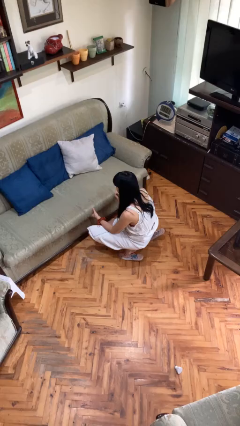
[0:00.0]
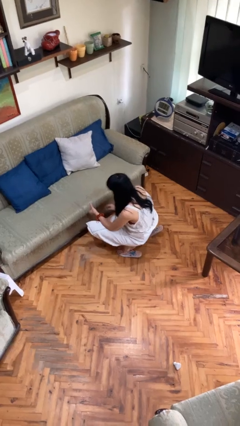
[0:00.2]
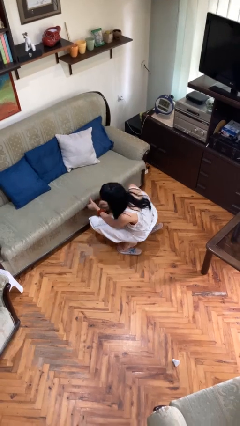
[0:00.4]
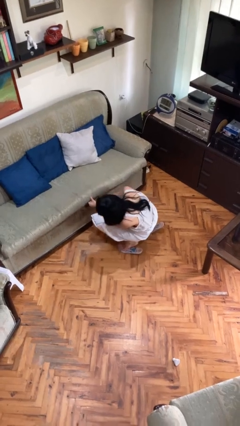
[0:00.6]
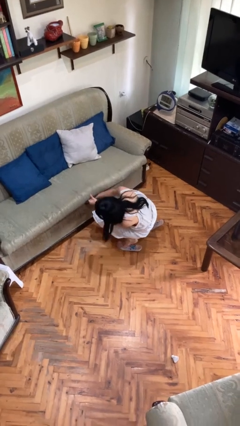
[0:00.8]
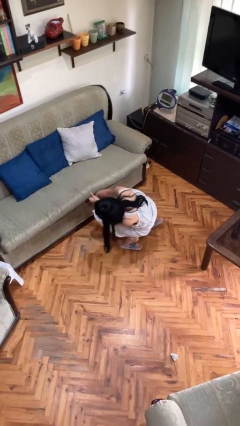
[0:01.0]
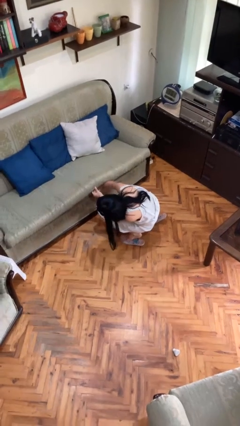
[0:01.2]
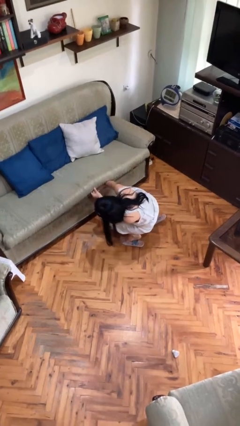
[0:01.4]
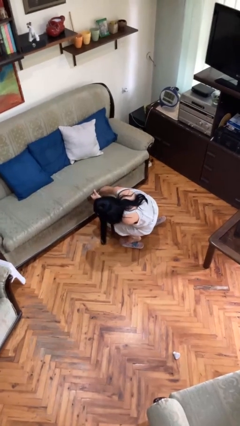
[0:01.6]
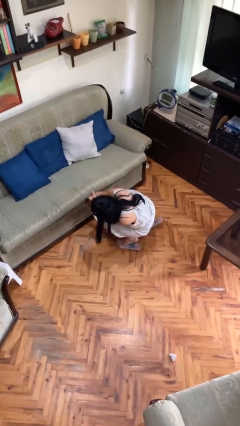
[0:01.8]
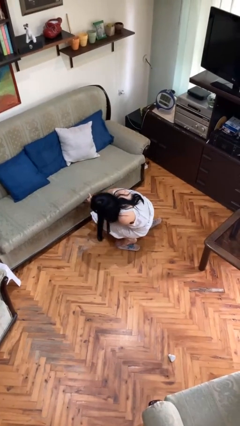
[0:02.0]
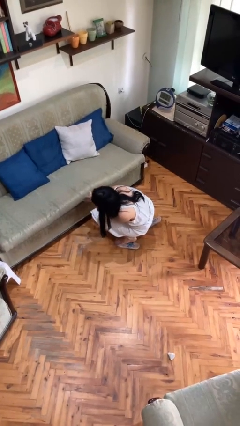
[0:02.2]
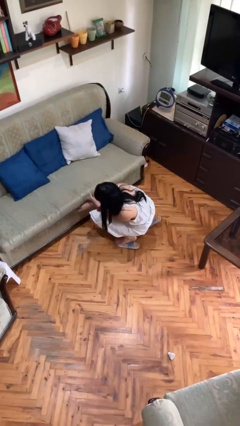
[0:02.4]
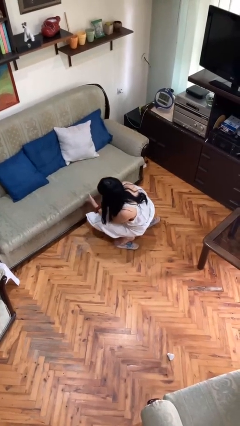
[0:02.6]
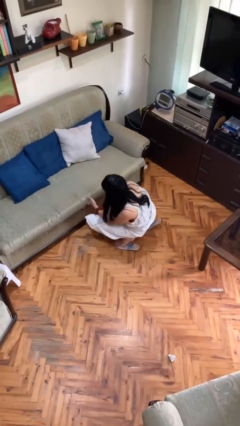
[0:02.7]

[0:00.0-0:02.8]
person searches under couch

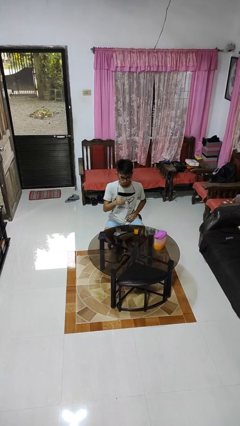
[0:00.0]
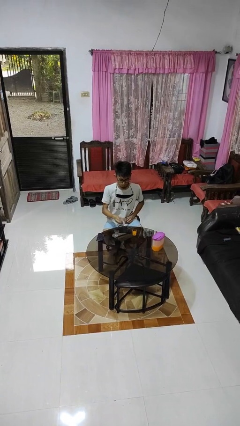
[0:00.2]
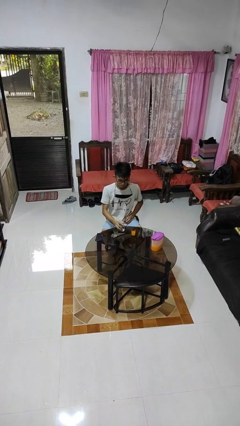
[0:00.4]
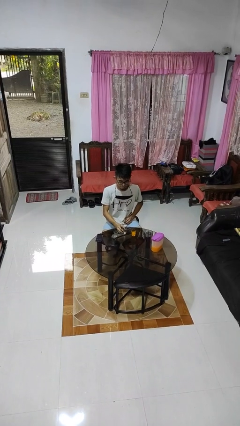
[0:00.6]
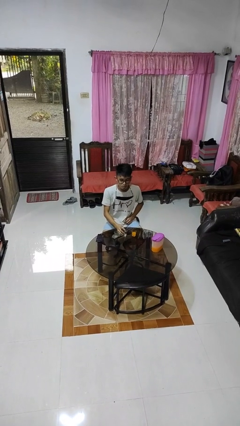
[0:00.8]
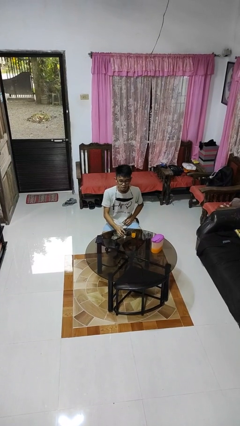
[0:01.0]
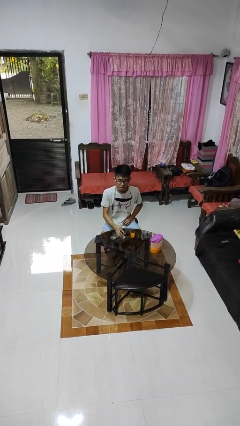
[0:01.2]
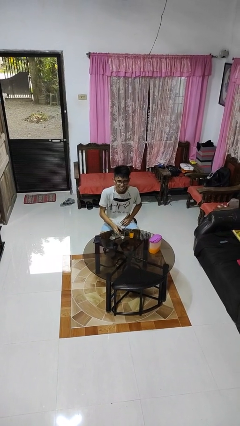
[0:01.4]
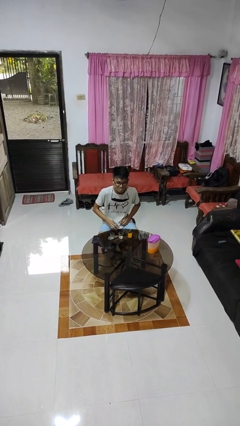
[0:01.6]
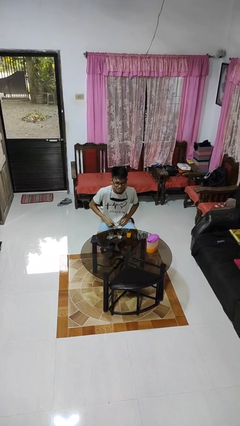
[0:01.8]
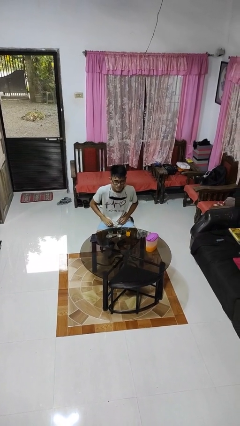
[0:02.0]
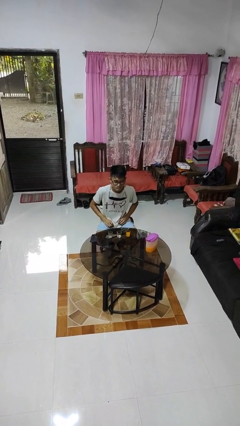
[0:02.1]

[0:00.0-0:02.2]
person puts down object on table

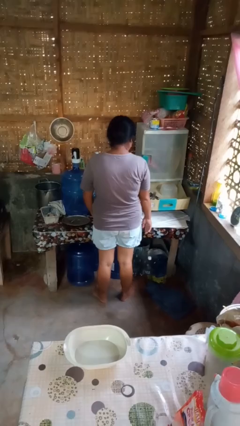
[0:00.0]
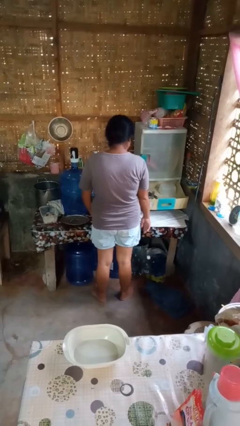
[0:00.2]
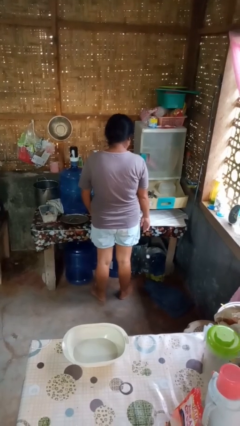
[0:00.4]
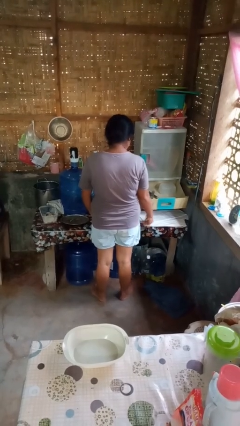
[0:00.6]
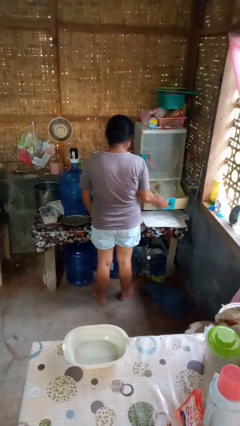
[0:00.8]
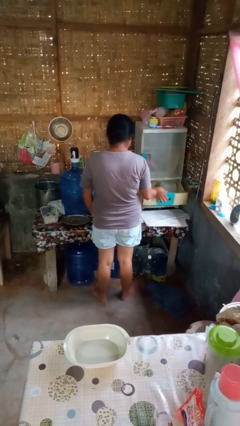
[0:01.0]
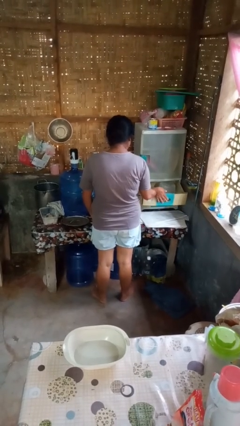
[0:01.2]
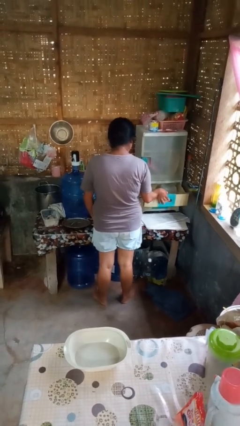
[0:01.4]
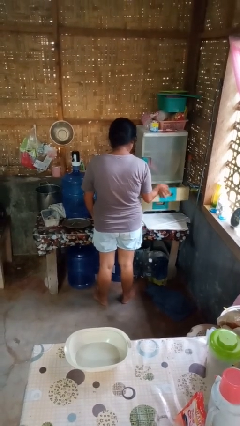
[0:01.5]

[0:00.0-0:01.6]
person closes kitchen drawer

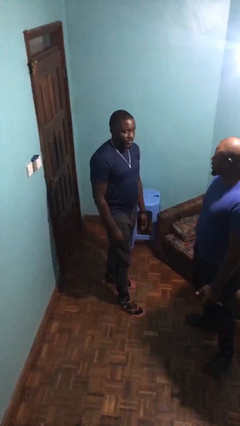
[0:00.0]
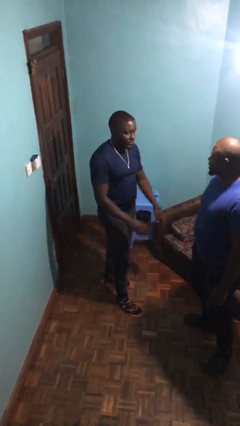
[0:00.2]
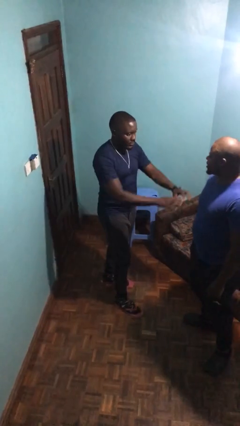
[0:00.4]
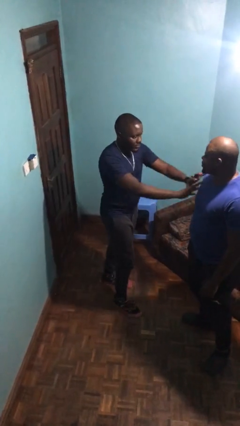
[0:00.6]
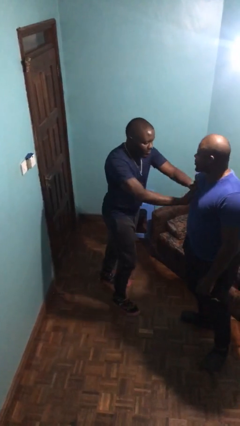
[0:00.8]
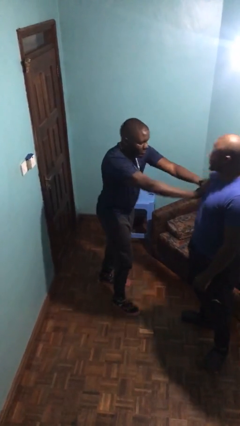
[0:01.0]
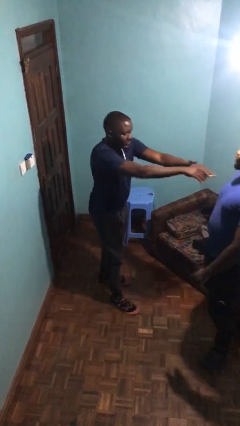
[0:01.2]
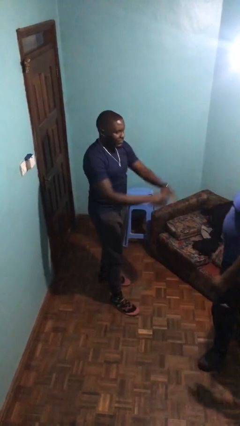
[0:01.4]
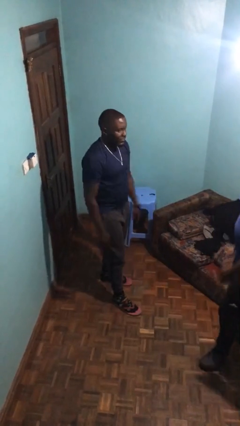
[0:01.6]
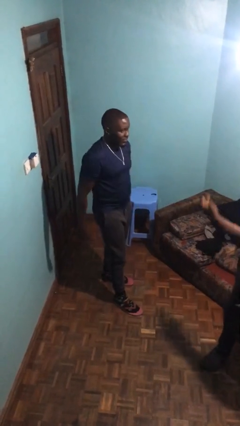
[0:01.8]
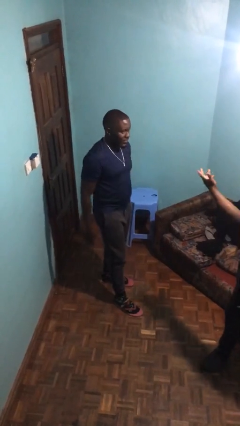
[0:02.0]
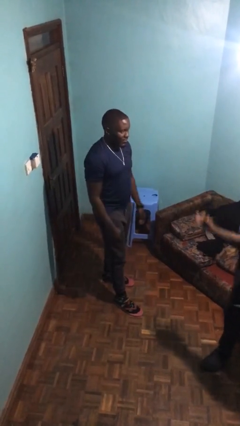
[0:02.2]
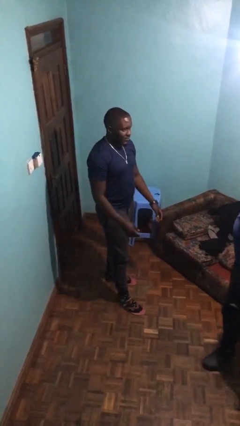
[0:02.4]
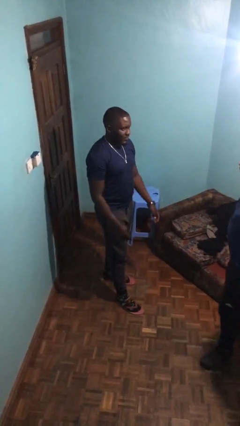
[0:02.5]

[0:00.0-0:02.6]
person shoves person

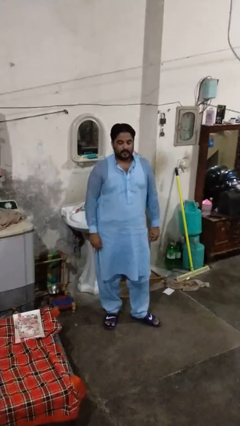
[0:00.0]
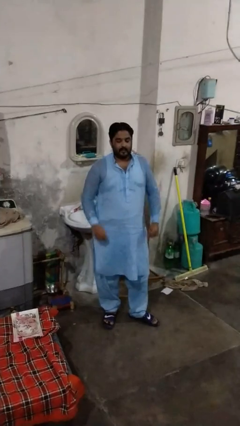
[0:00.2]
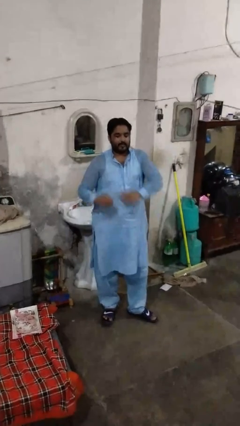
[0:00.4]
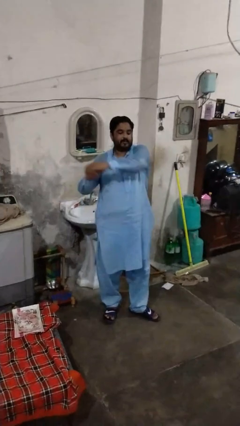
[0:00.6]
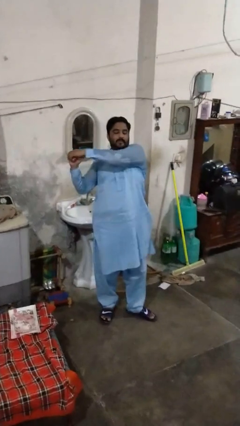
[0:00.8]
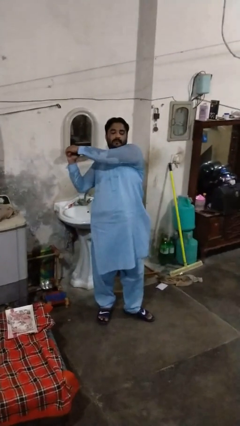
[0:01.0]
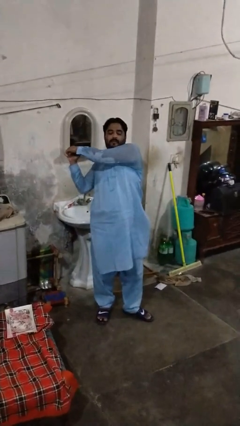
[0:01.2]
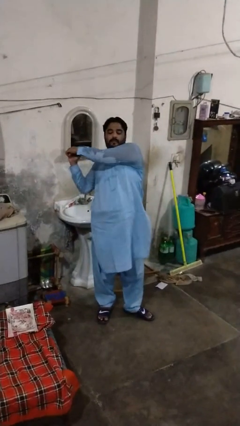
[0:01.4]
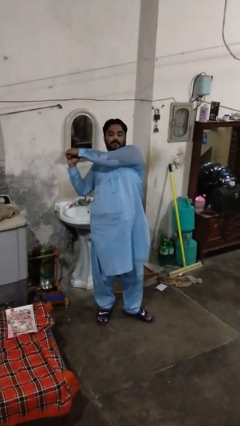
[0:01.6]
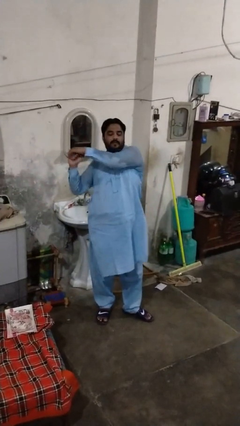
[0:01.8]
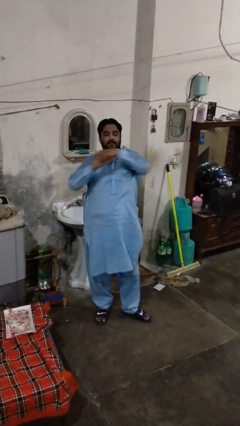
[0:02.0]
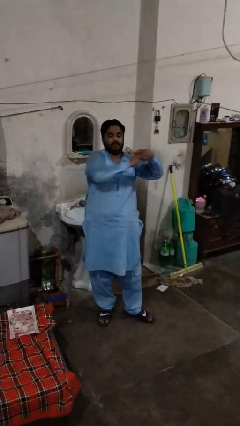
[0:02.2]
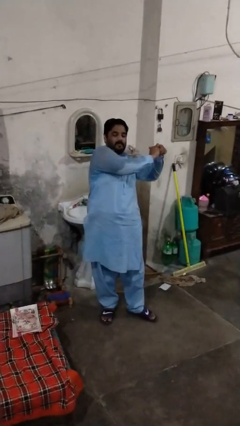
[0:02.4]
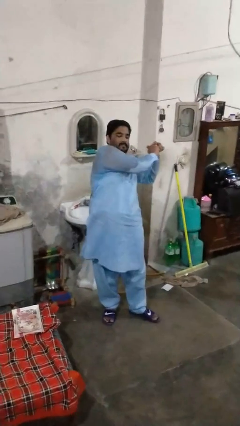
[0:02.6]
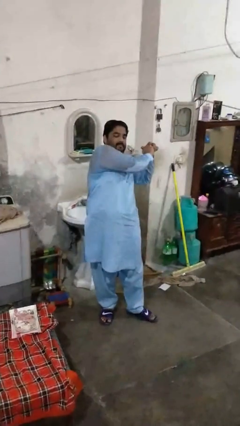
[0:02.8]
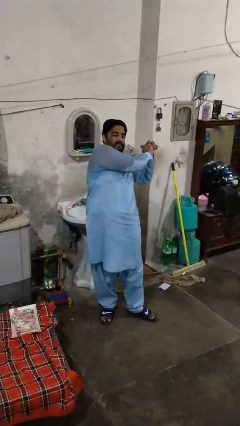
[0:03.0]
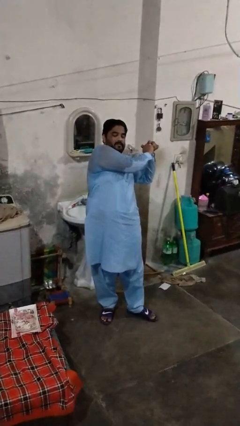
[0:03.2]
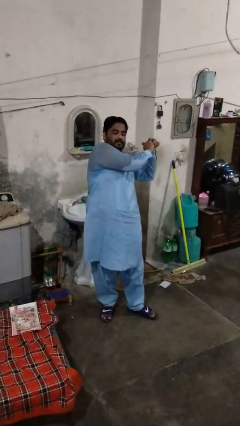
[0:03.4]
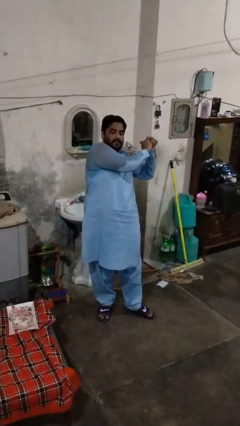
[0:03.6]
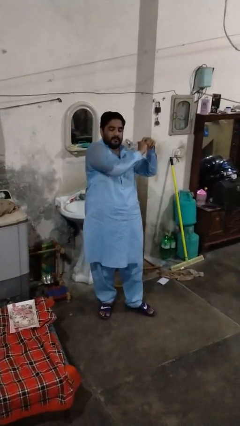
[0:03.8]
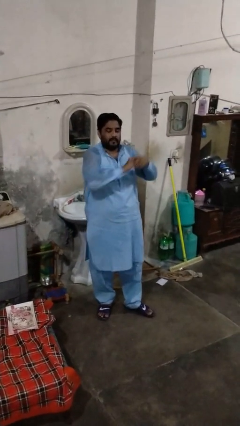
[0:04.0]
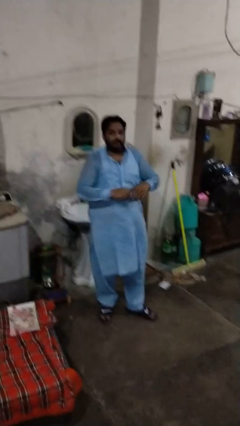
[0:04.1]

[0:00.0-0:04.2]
person stretches arms to side

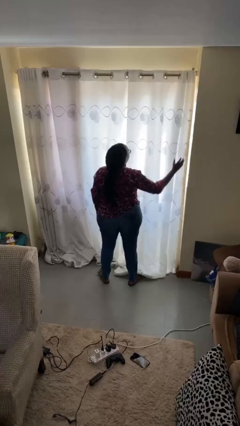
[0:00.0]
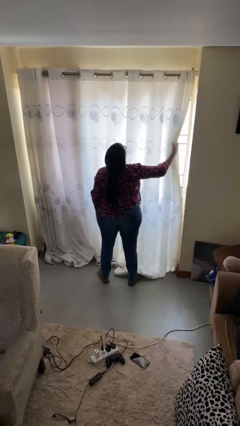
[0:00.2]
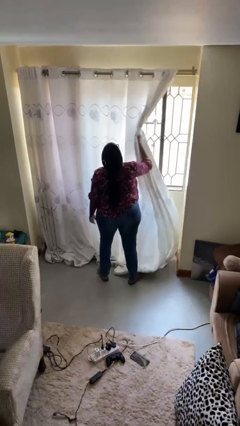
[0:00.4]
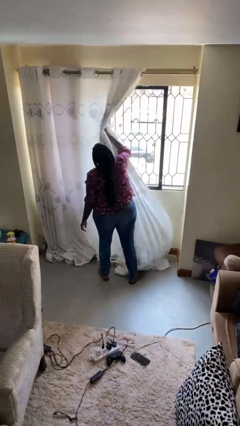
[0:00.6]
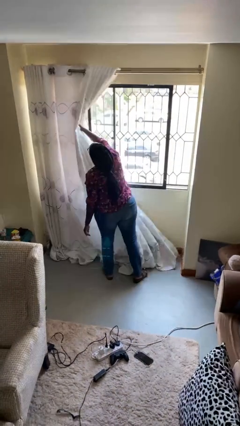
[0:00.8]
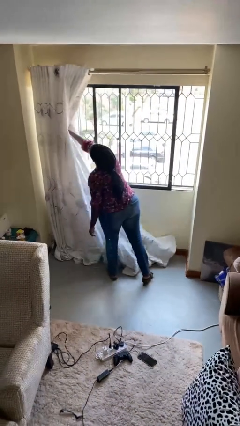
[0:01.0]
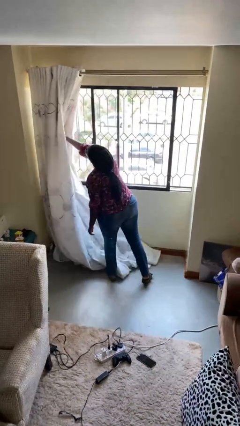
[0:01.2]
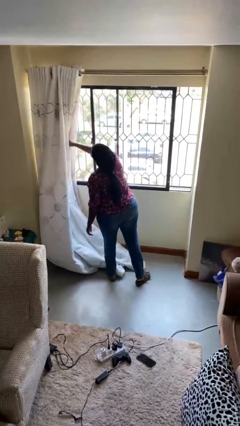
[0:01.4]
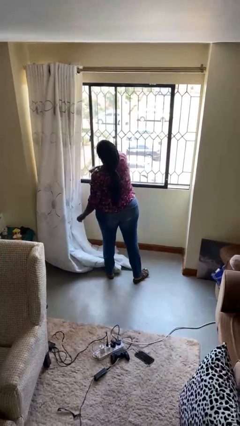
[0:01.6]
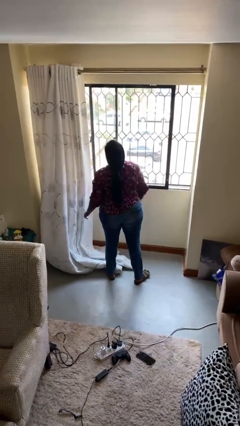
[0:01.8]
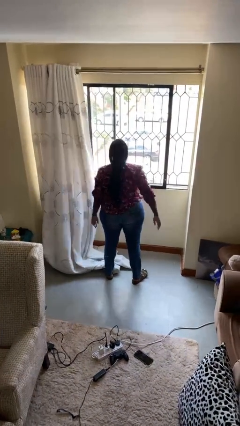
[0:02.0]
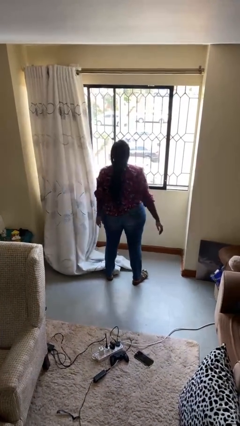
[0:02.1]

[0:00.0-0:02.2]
person opens curtains

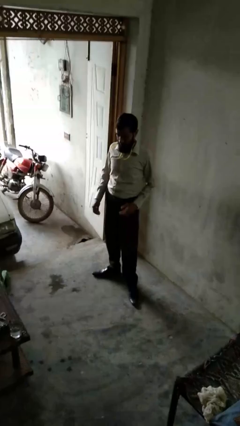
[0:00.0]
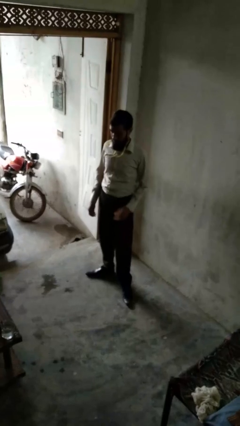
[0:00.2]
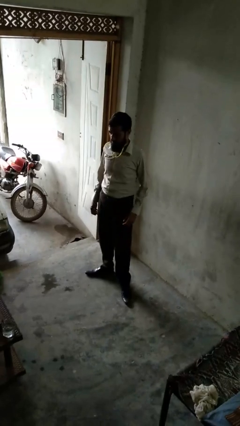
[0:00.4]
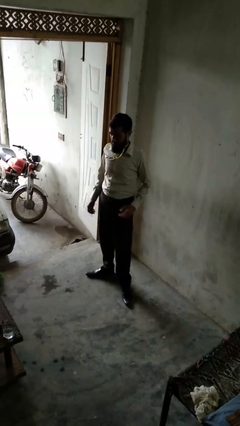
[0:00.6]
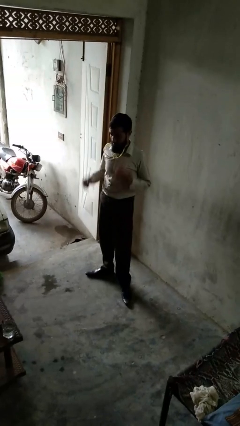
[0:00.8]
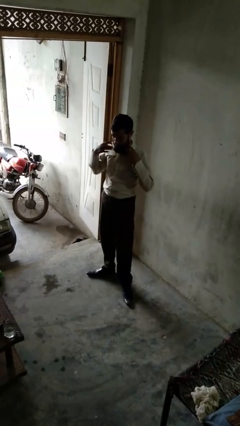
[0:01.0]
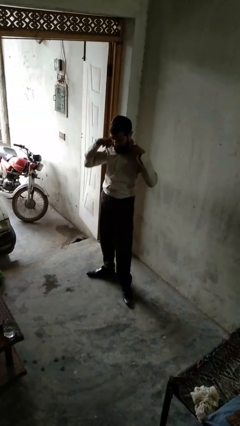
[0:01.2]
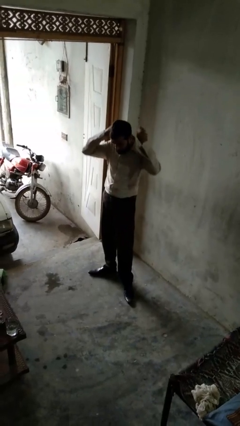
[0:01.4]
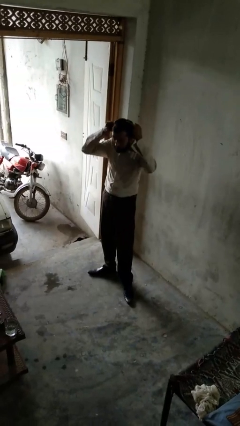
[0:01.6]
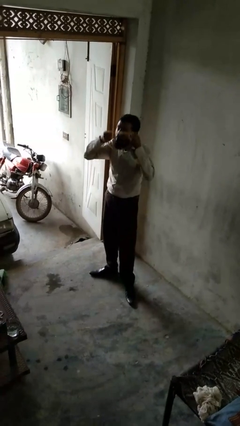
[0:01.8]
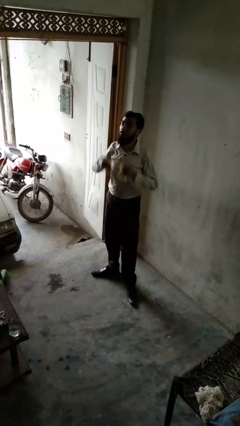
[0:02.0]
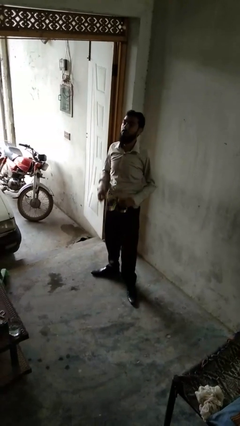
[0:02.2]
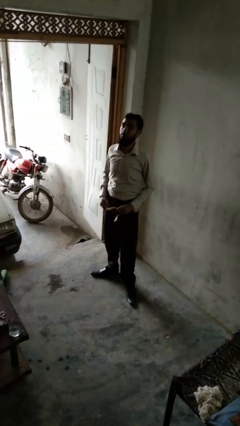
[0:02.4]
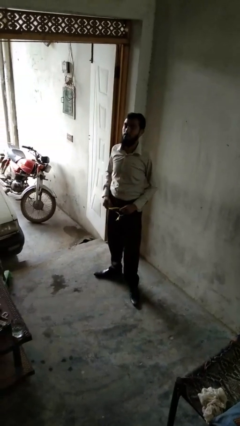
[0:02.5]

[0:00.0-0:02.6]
person takes off necklace
